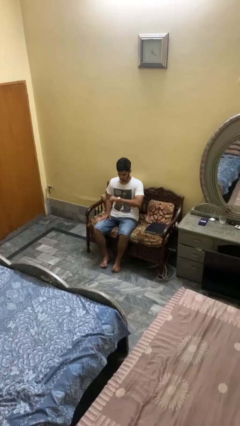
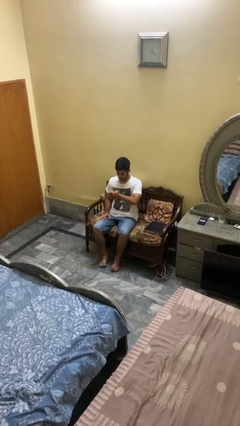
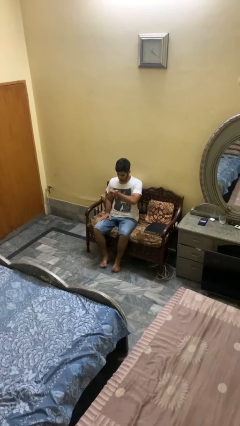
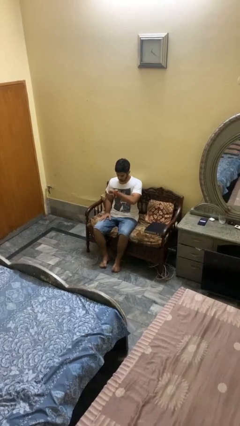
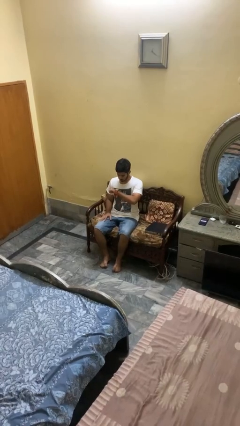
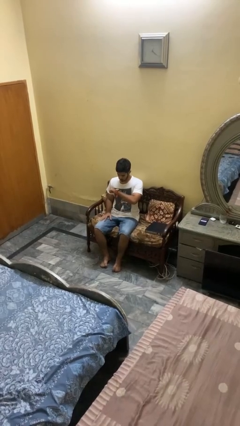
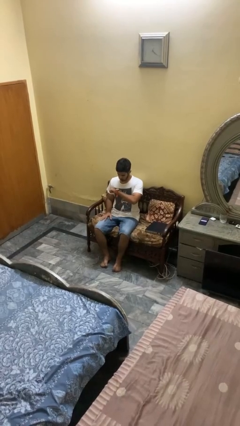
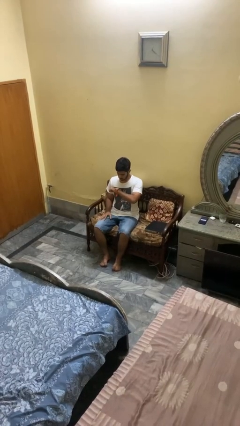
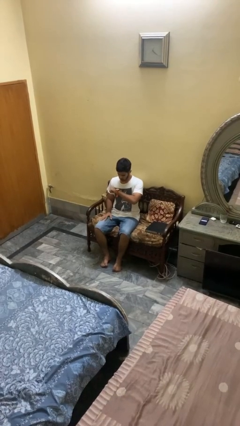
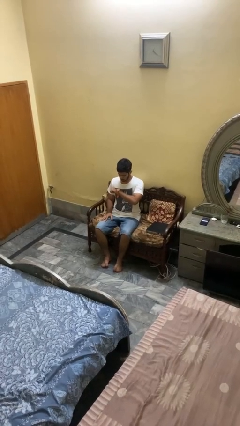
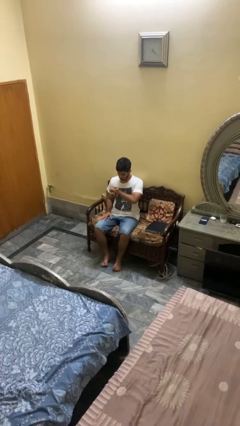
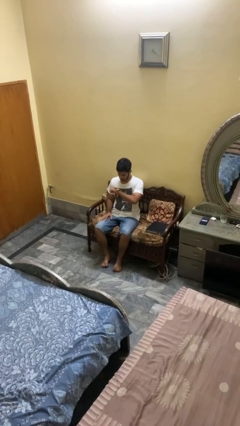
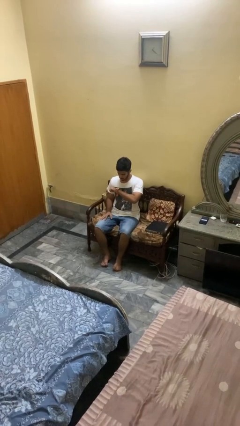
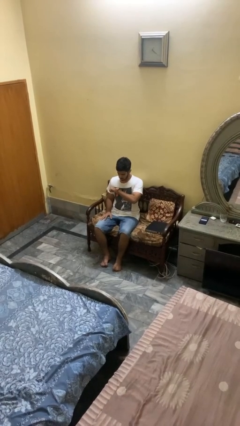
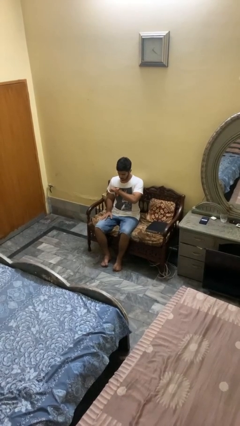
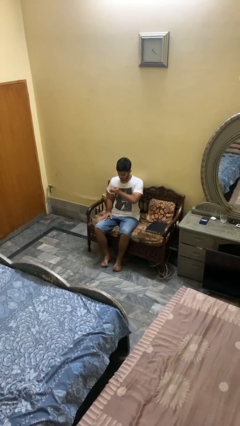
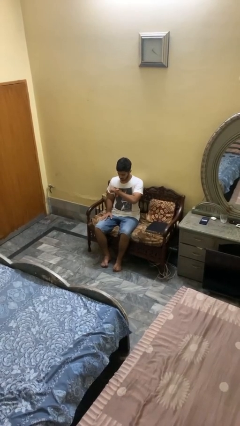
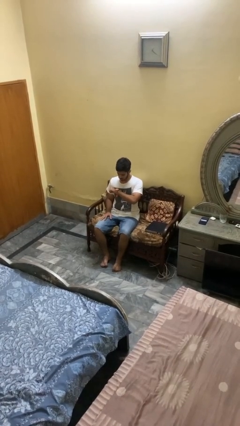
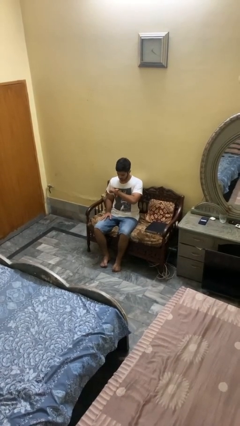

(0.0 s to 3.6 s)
person looks at wristwatch

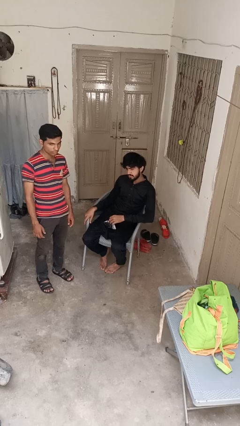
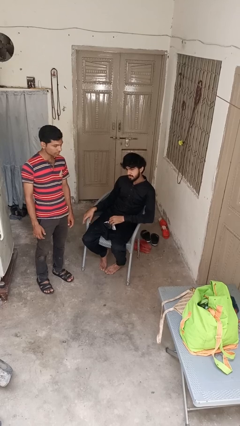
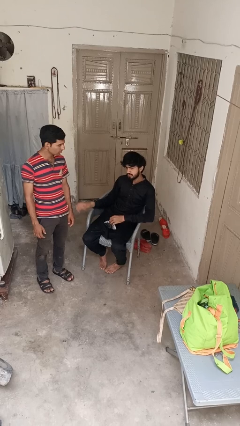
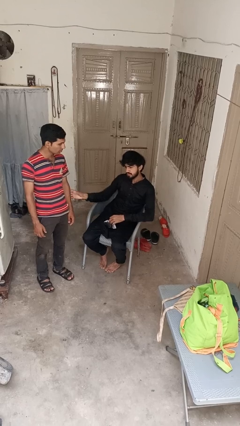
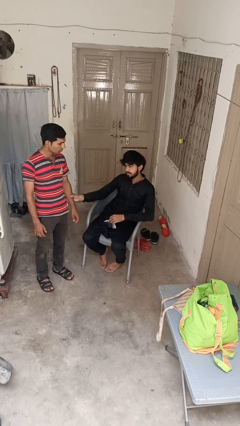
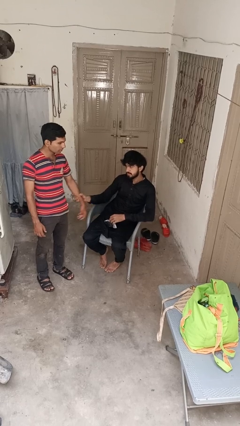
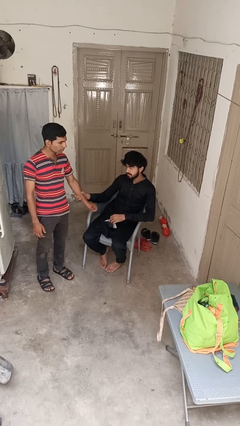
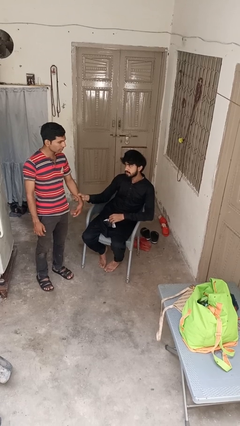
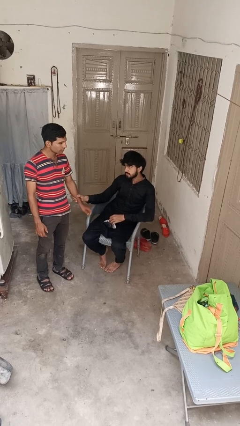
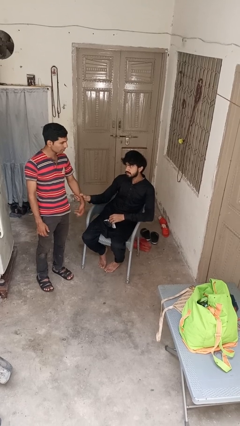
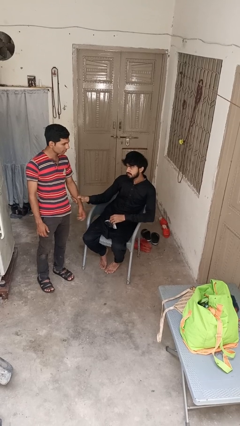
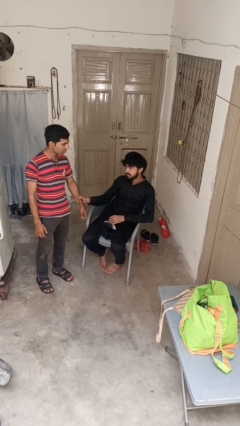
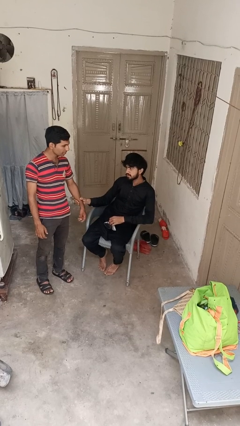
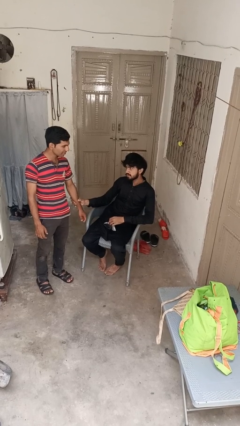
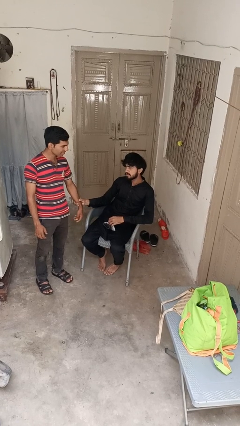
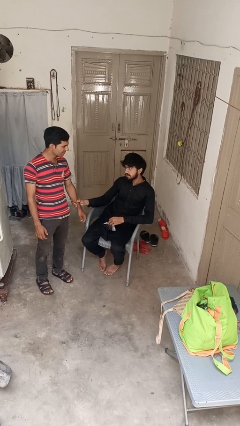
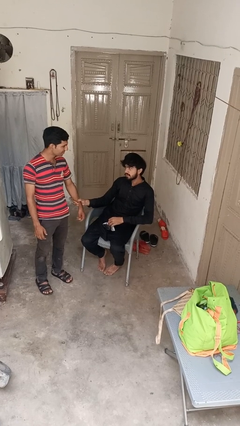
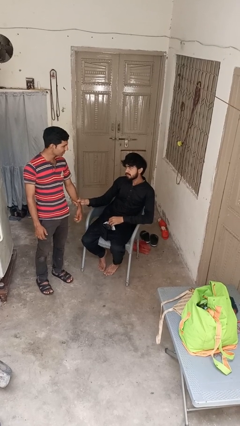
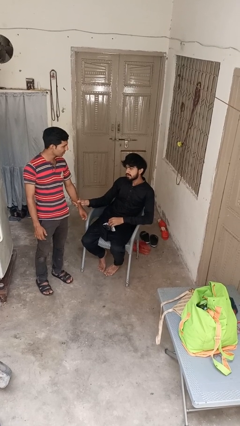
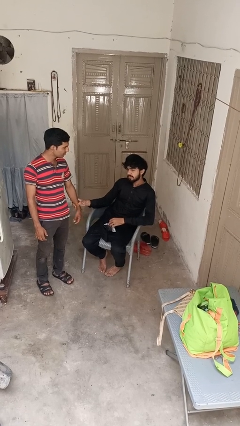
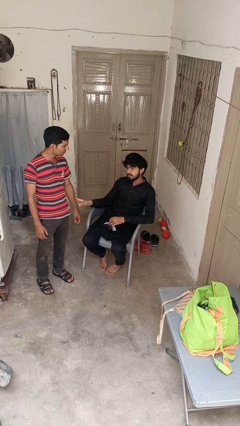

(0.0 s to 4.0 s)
person grabs person by forearm

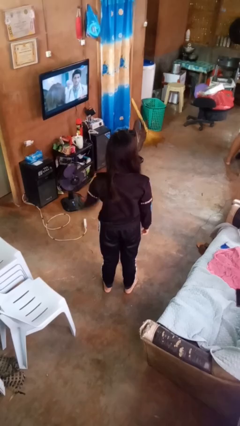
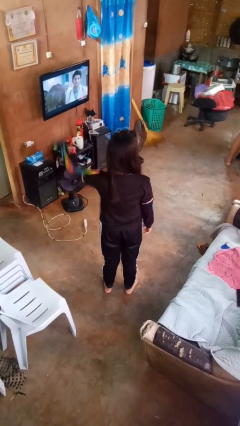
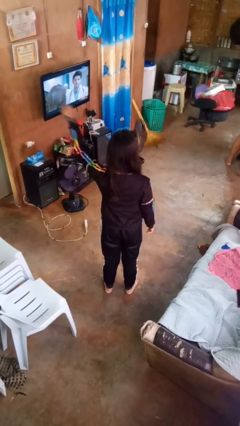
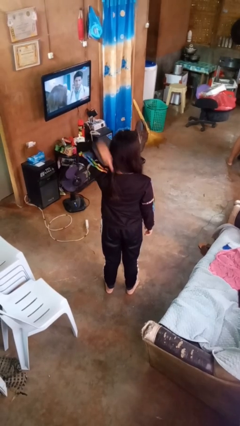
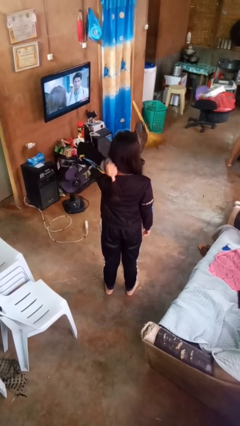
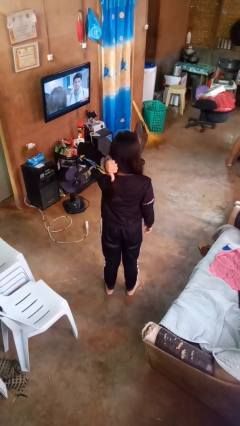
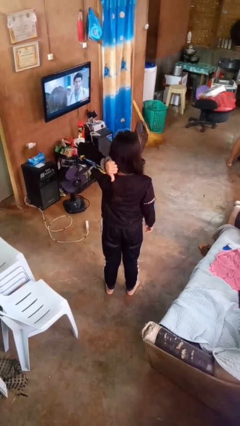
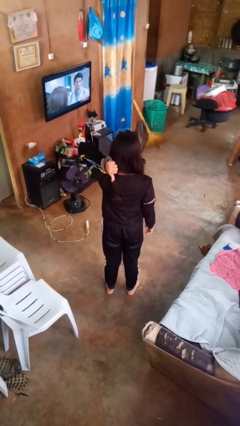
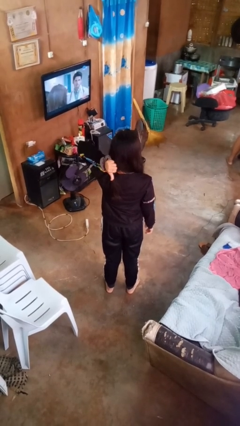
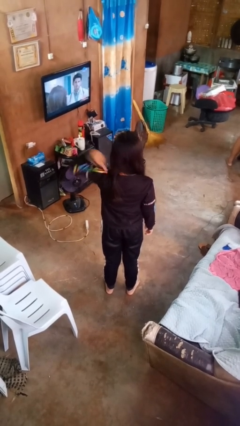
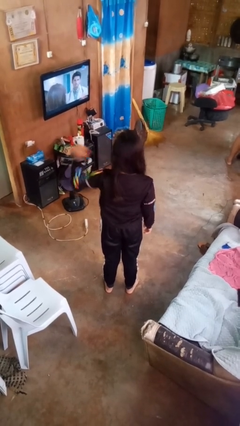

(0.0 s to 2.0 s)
person gestures behind me

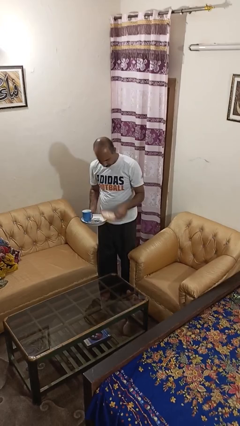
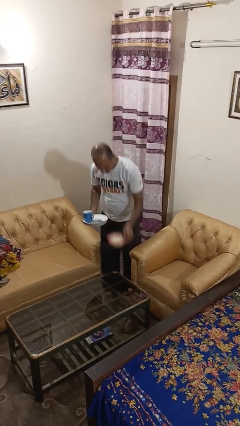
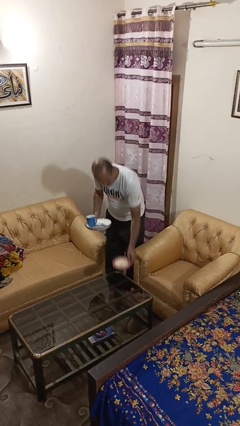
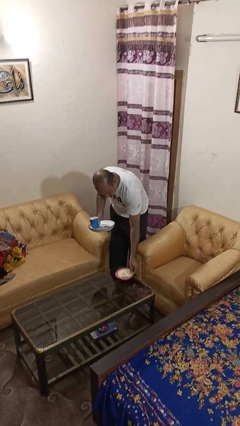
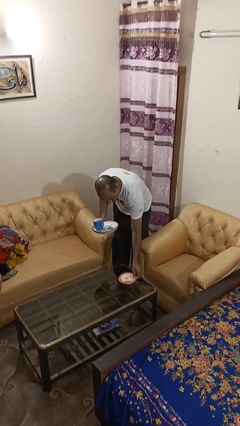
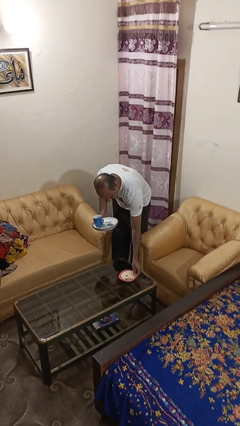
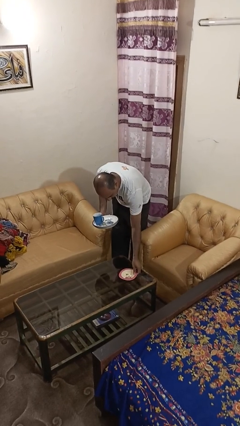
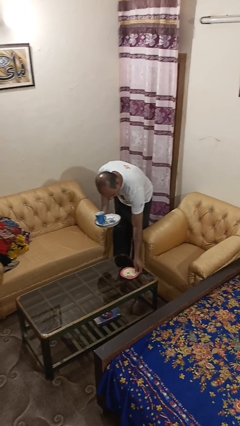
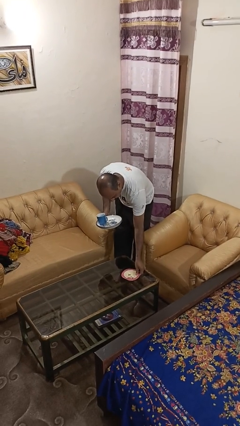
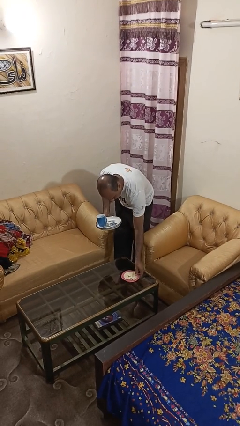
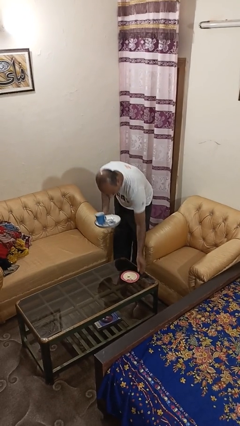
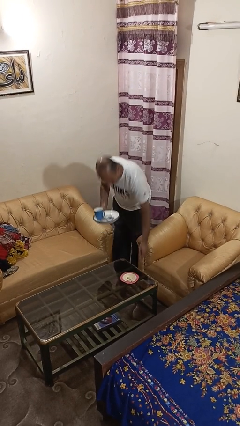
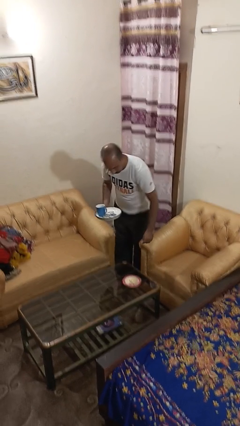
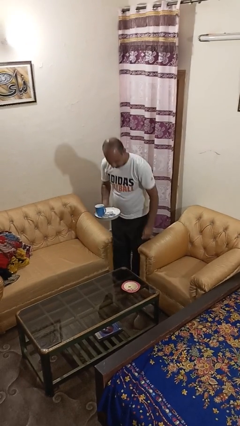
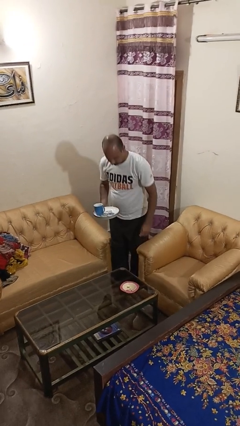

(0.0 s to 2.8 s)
person sets table

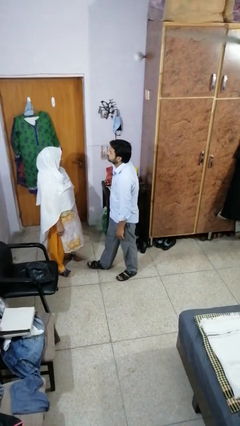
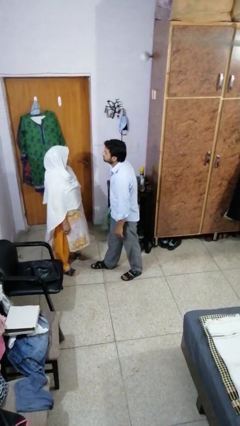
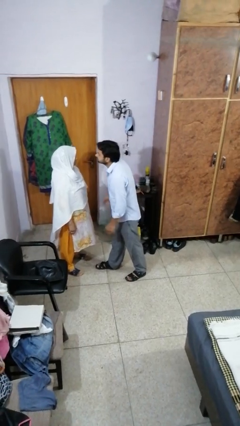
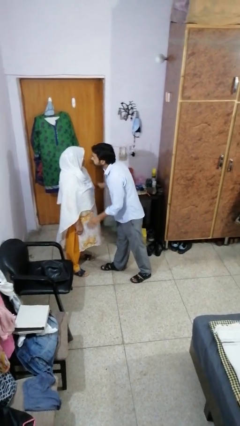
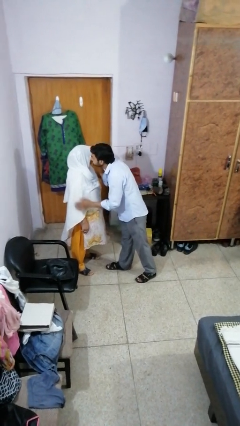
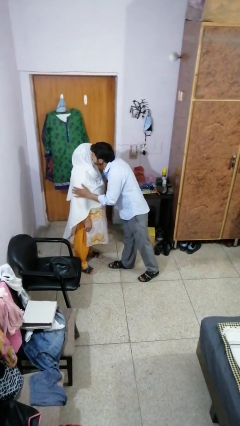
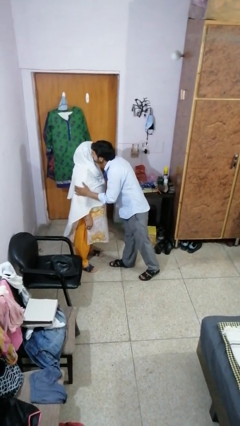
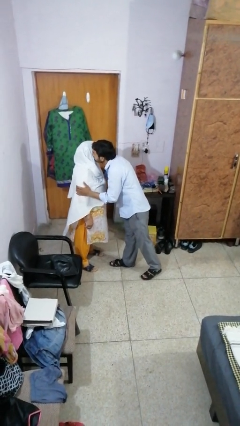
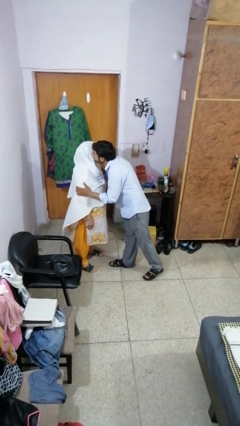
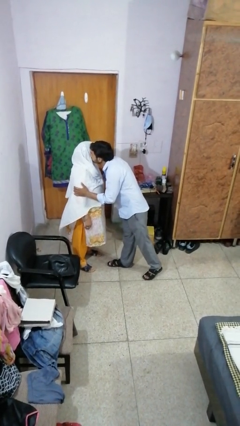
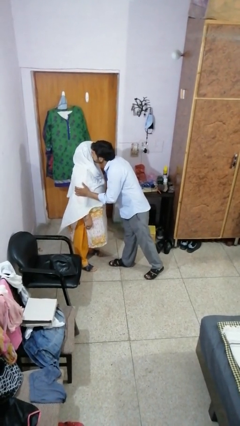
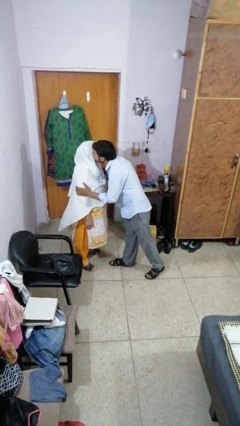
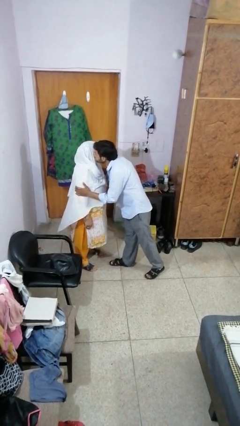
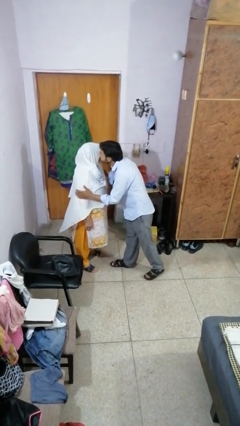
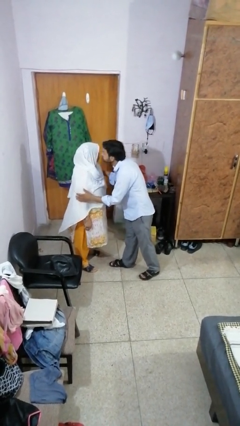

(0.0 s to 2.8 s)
person kisses cheek of person

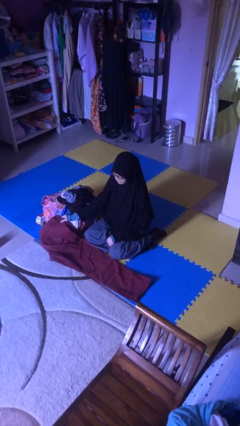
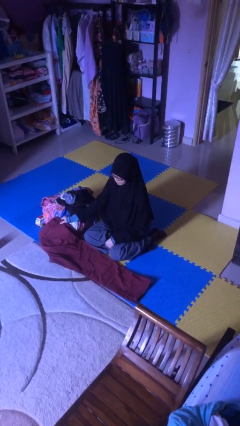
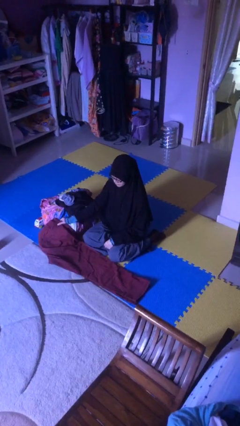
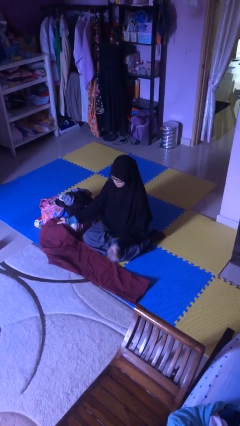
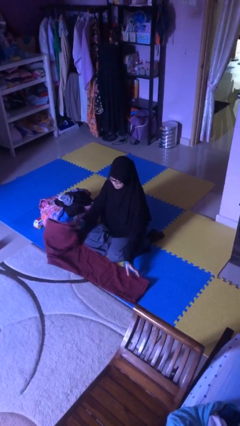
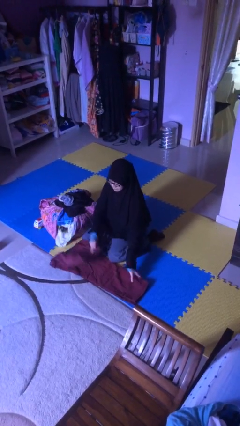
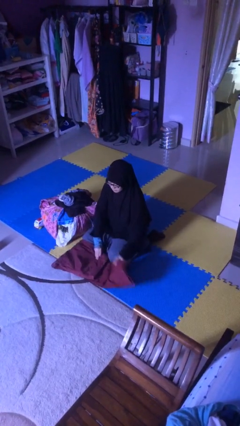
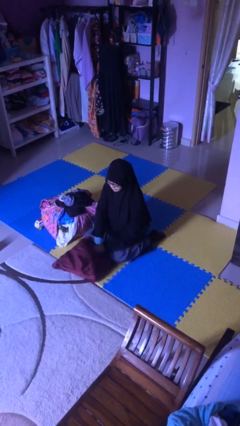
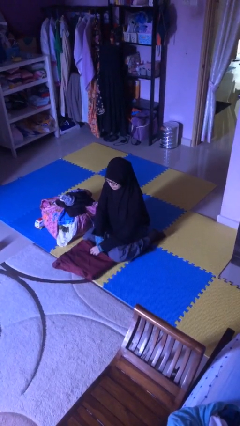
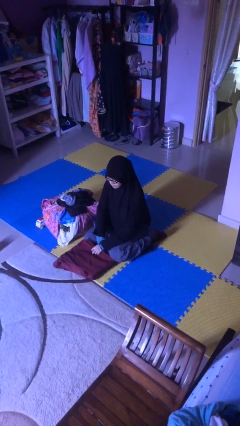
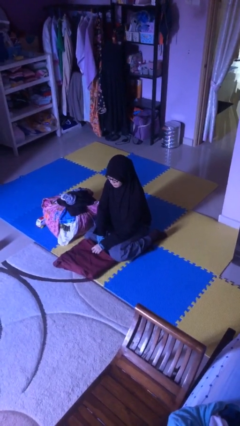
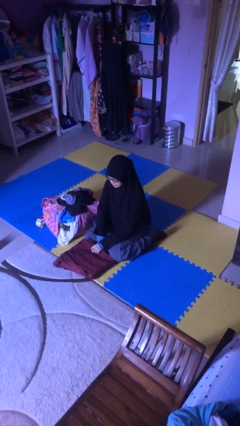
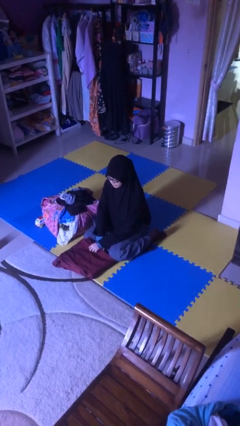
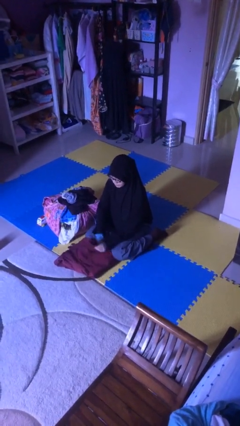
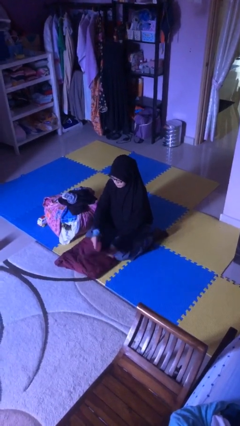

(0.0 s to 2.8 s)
person folds pants
